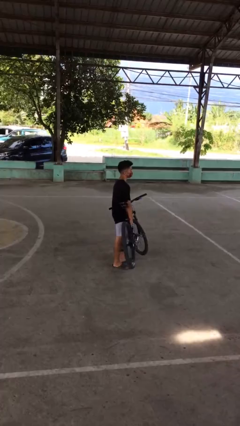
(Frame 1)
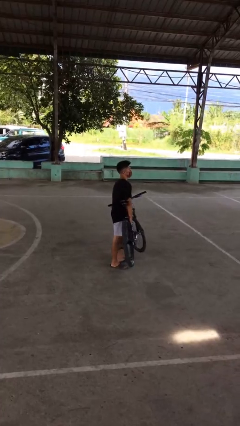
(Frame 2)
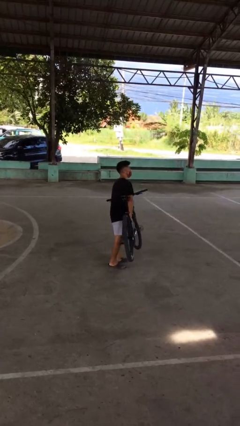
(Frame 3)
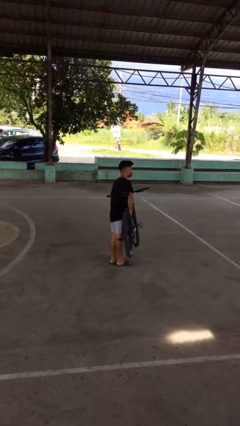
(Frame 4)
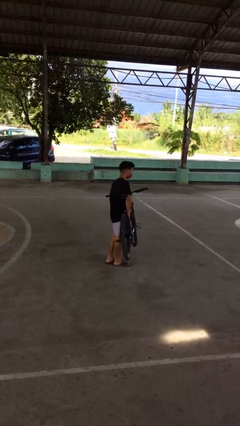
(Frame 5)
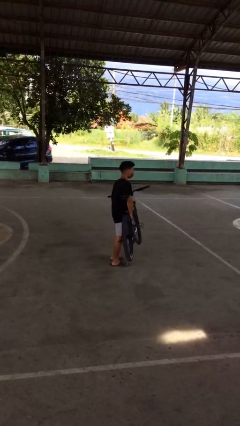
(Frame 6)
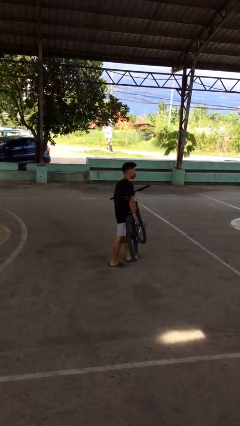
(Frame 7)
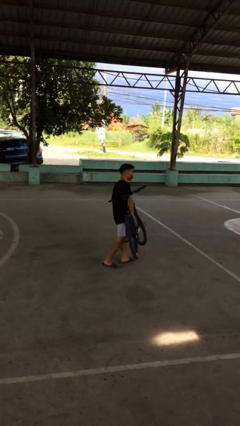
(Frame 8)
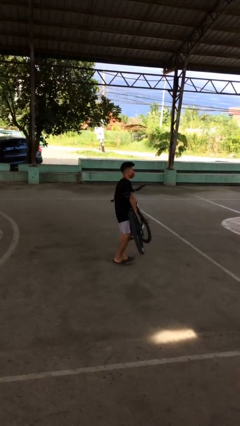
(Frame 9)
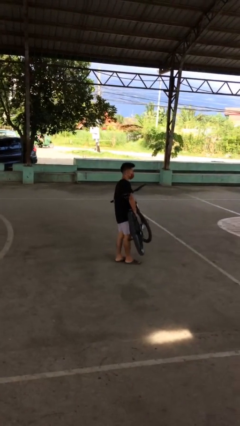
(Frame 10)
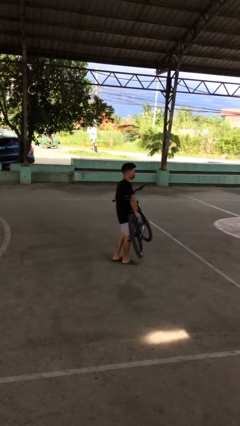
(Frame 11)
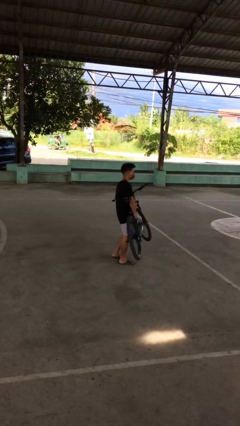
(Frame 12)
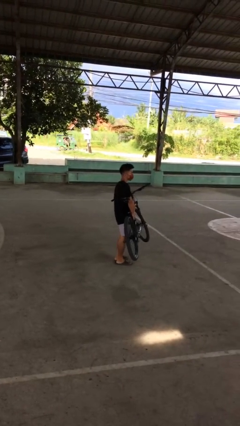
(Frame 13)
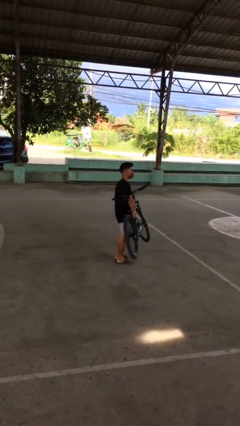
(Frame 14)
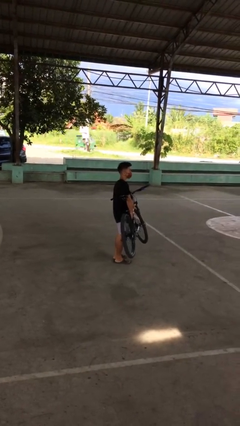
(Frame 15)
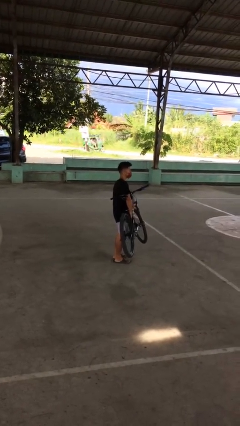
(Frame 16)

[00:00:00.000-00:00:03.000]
person carries bicycle

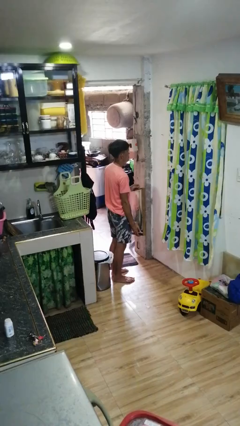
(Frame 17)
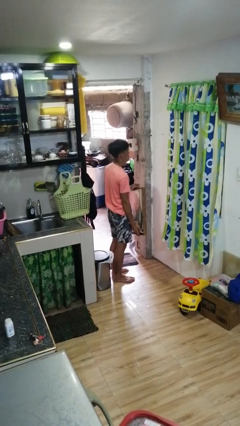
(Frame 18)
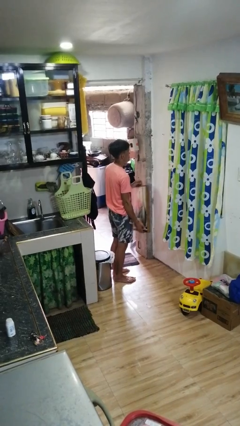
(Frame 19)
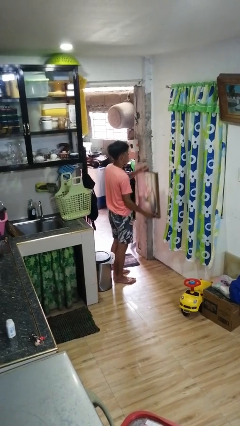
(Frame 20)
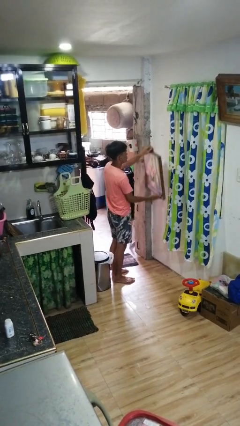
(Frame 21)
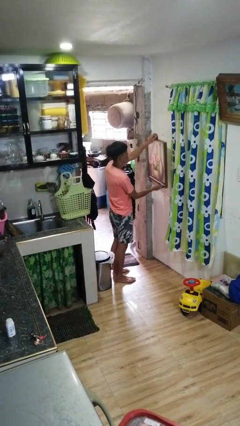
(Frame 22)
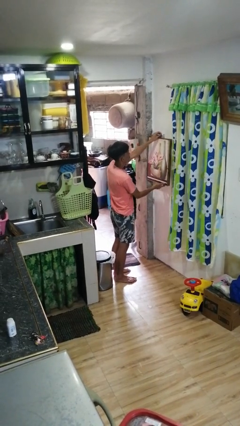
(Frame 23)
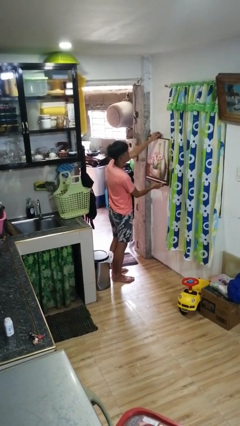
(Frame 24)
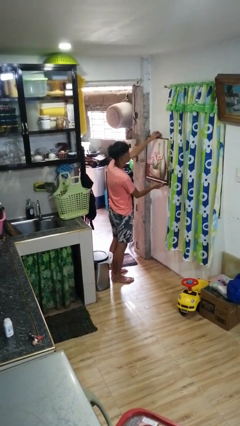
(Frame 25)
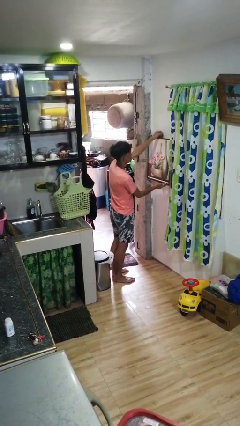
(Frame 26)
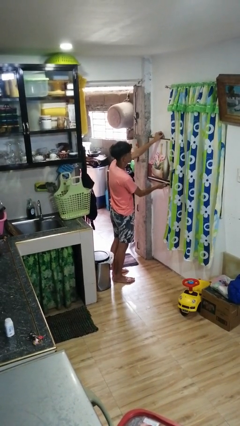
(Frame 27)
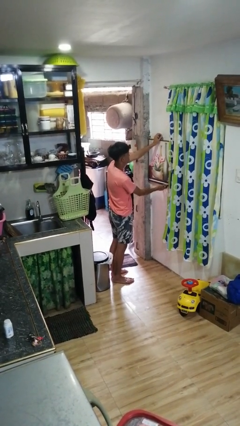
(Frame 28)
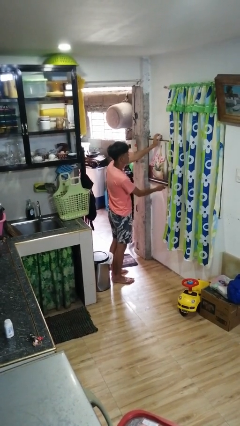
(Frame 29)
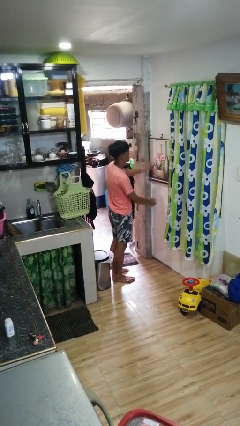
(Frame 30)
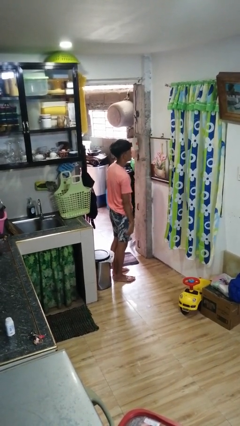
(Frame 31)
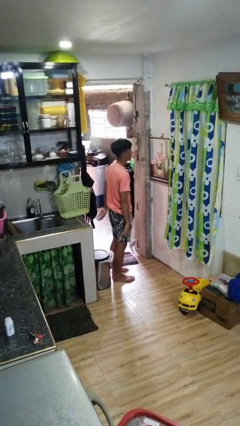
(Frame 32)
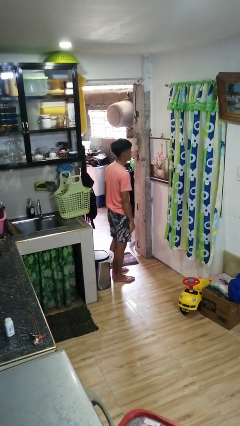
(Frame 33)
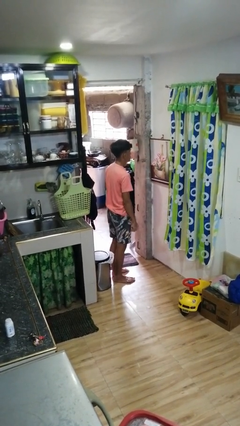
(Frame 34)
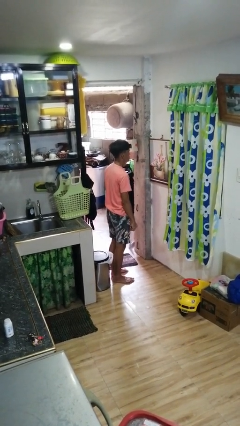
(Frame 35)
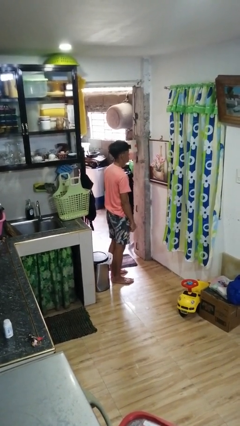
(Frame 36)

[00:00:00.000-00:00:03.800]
person puts up picture frame

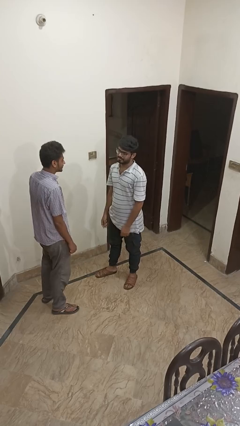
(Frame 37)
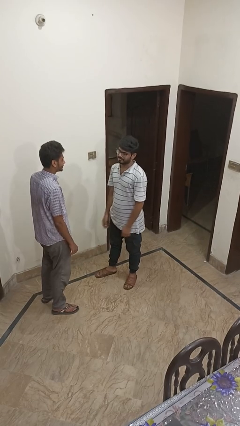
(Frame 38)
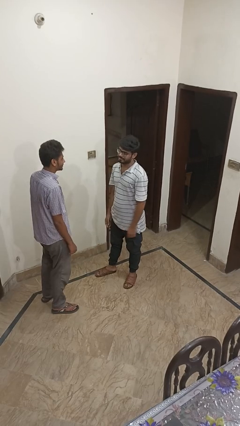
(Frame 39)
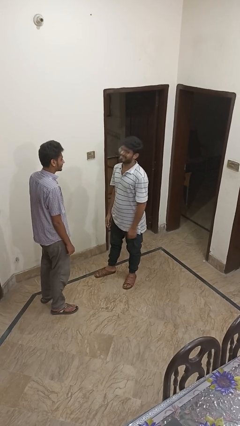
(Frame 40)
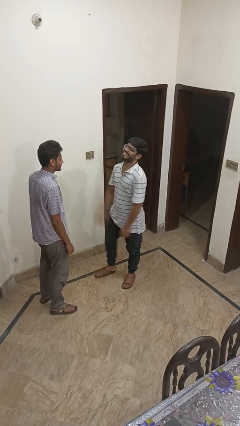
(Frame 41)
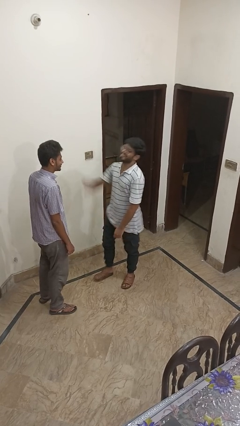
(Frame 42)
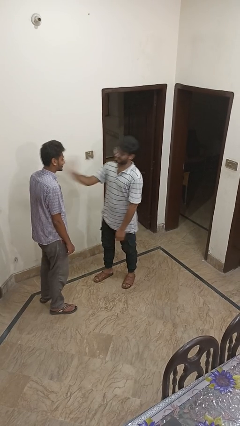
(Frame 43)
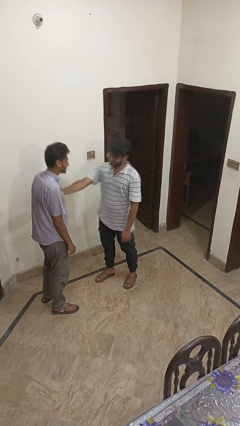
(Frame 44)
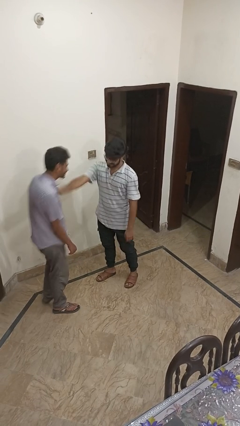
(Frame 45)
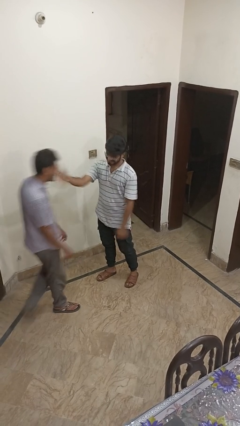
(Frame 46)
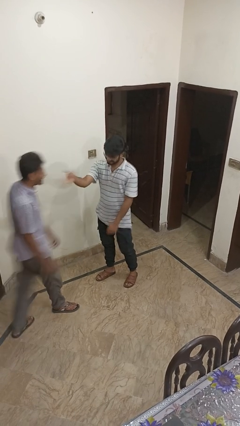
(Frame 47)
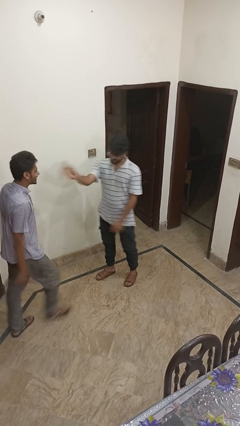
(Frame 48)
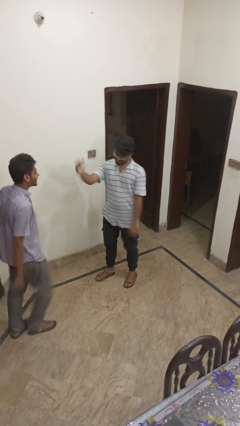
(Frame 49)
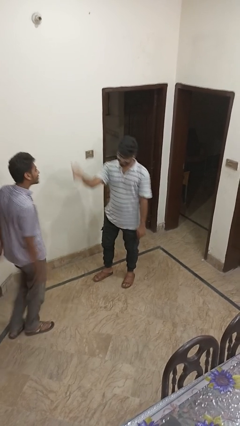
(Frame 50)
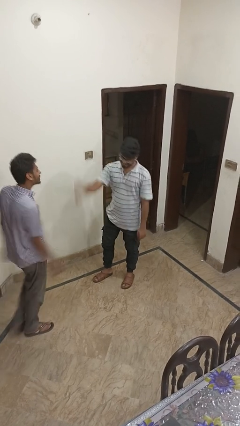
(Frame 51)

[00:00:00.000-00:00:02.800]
person shoves person

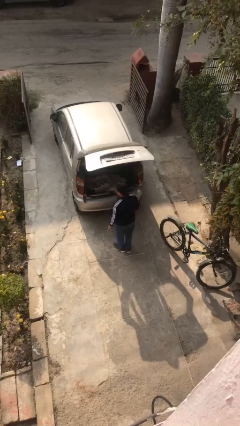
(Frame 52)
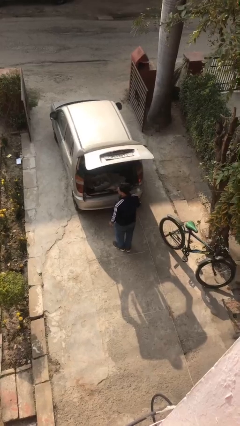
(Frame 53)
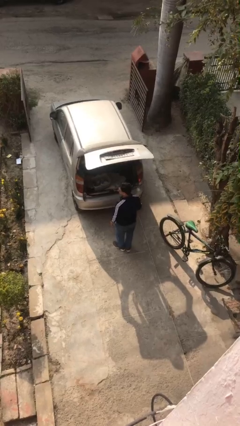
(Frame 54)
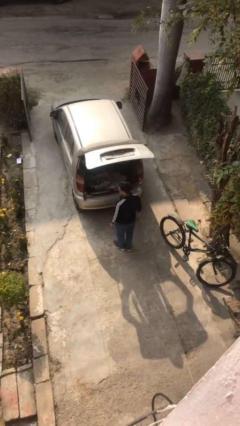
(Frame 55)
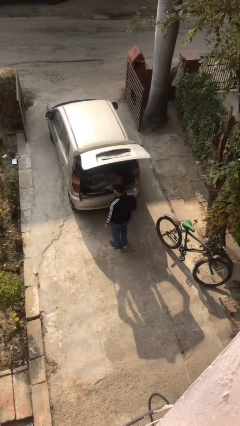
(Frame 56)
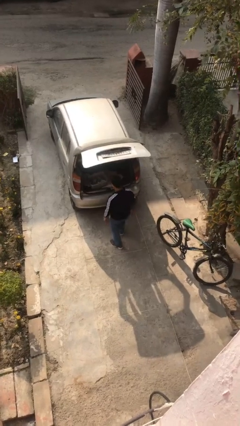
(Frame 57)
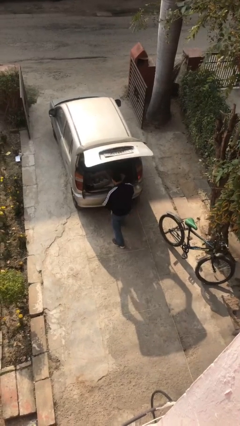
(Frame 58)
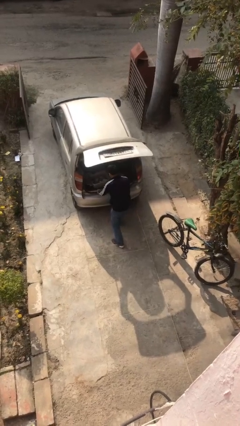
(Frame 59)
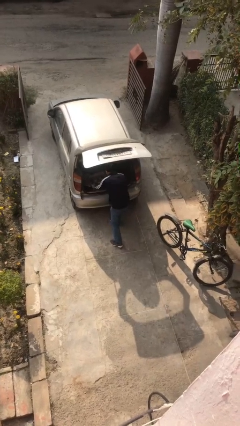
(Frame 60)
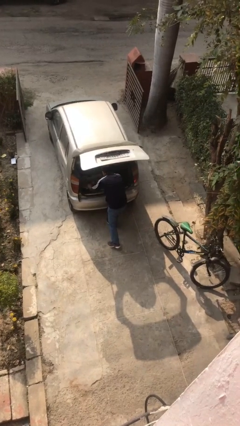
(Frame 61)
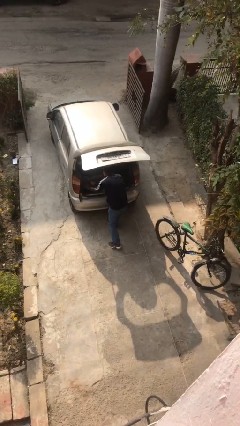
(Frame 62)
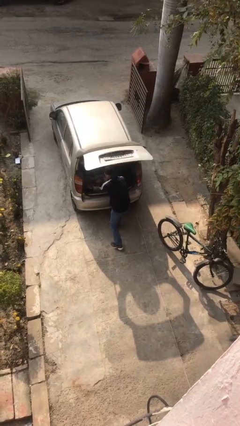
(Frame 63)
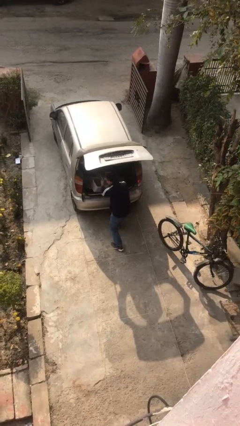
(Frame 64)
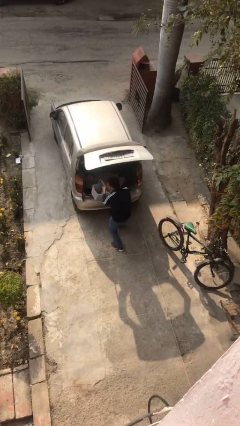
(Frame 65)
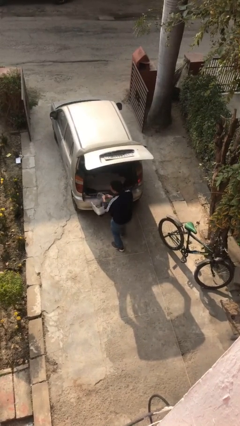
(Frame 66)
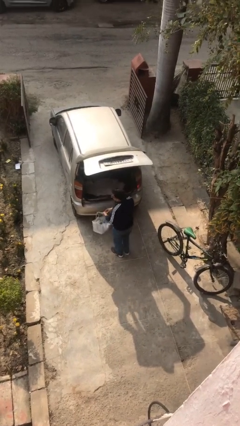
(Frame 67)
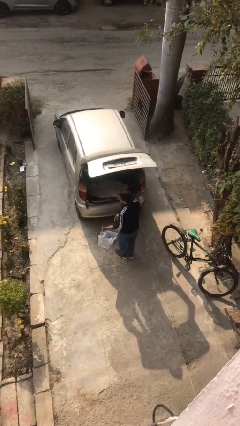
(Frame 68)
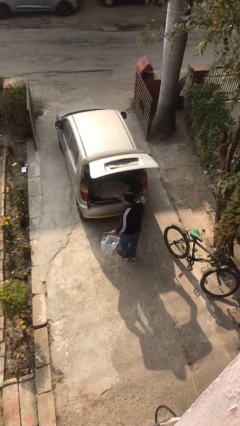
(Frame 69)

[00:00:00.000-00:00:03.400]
person unloads car

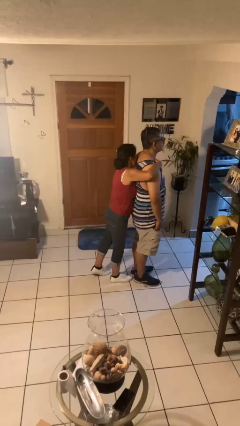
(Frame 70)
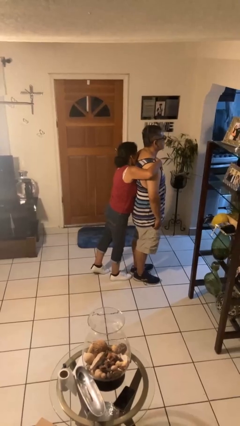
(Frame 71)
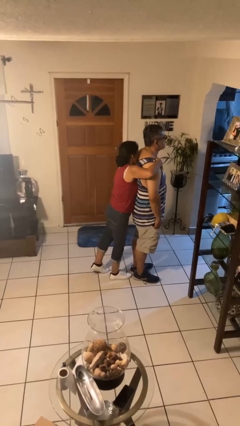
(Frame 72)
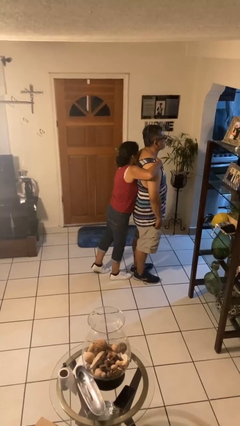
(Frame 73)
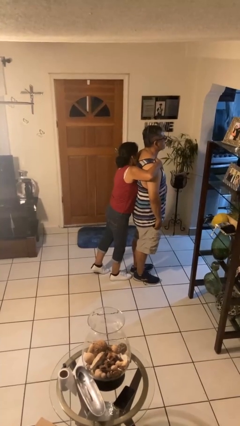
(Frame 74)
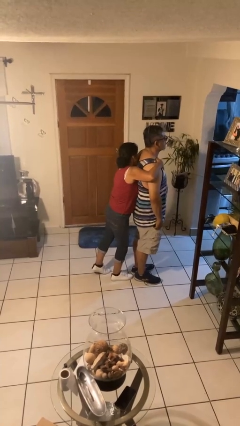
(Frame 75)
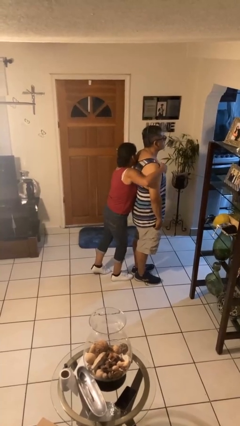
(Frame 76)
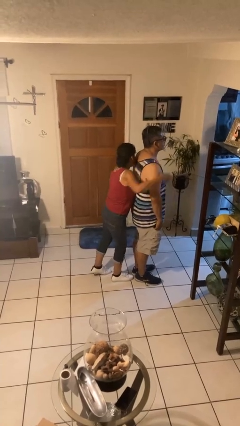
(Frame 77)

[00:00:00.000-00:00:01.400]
person hugs person from behind

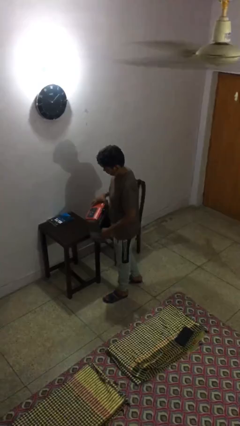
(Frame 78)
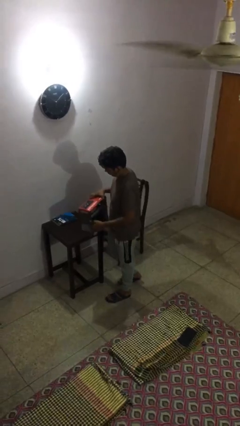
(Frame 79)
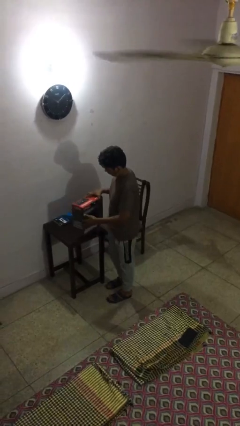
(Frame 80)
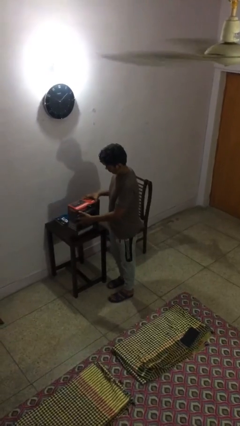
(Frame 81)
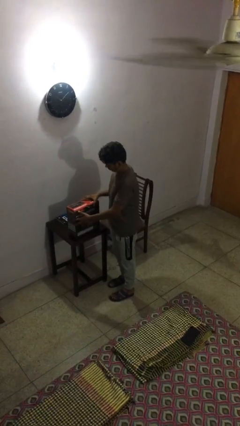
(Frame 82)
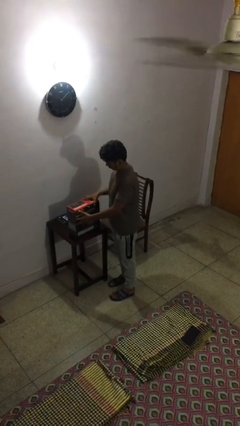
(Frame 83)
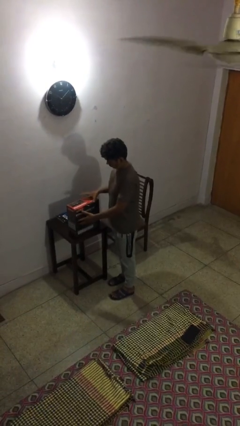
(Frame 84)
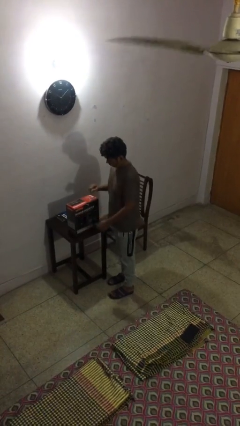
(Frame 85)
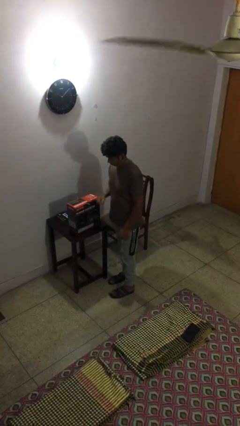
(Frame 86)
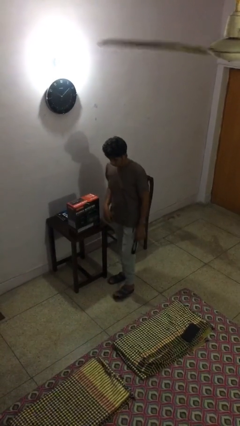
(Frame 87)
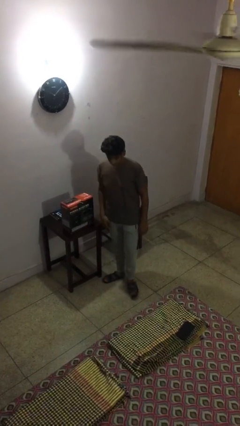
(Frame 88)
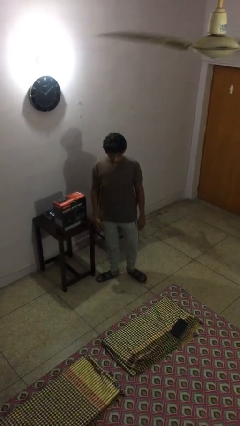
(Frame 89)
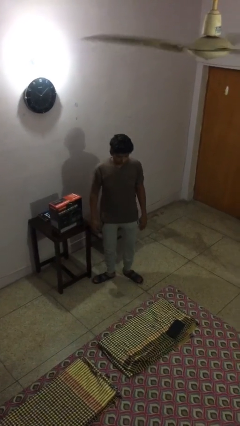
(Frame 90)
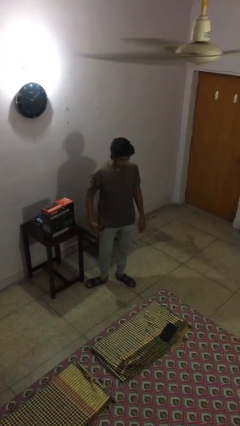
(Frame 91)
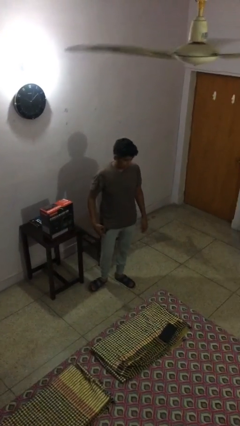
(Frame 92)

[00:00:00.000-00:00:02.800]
person puts down object on table

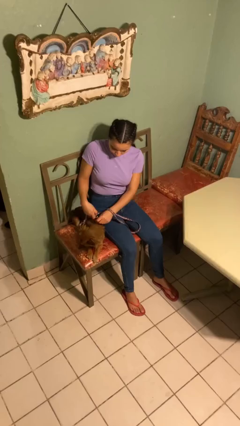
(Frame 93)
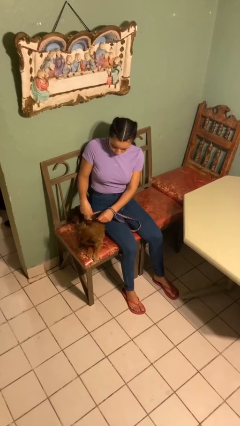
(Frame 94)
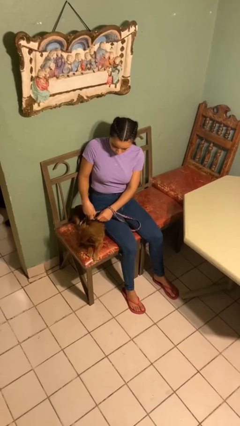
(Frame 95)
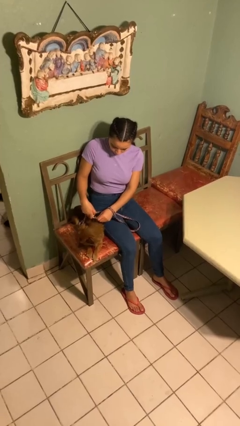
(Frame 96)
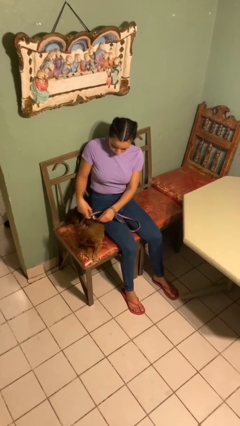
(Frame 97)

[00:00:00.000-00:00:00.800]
person attaches leash to dog
